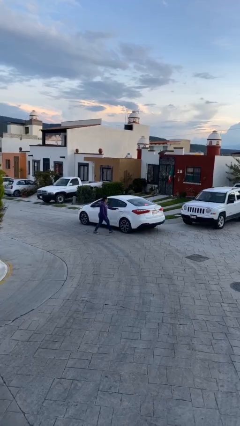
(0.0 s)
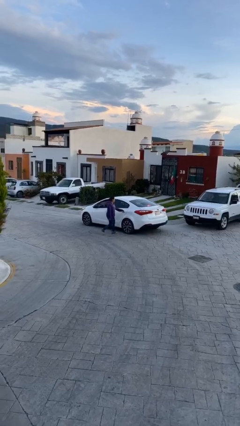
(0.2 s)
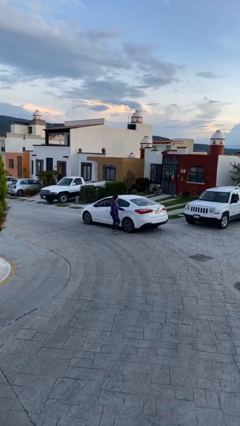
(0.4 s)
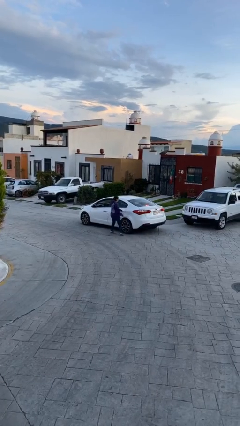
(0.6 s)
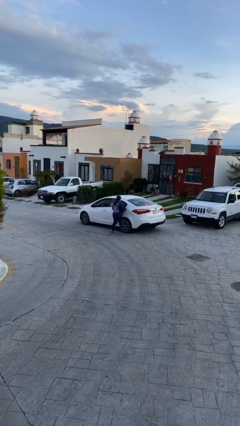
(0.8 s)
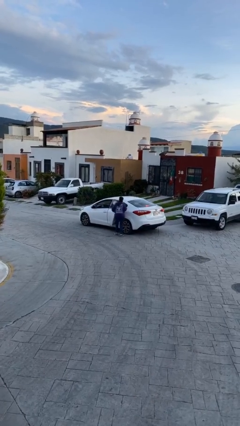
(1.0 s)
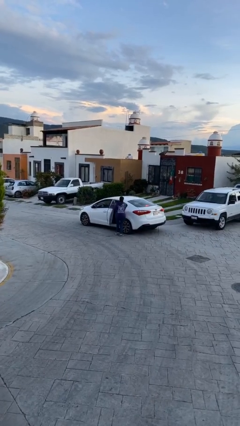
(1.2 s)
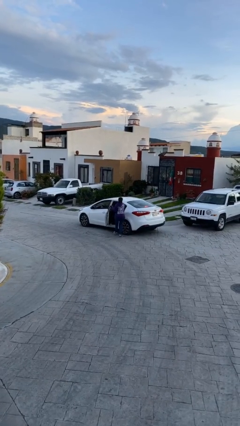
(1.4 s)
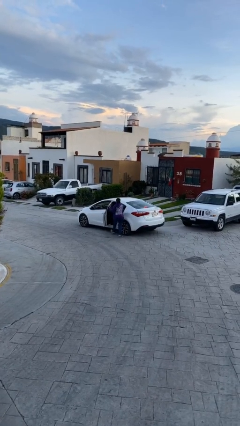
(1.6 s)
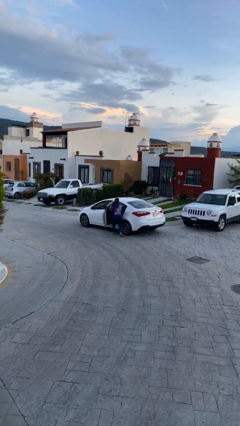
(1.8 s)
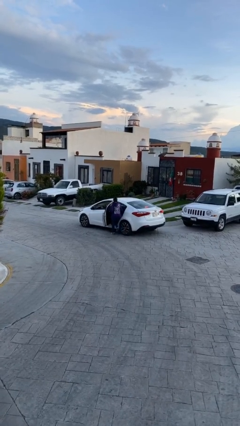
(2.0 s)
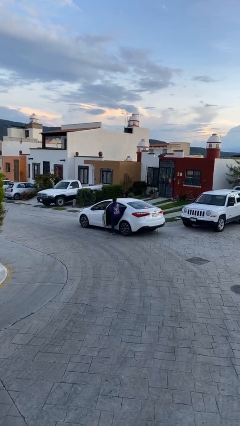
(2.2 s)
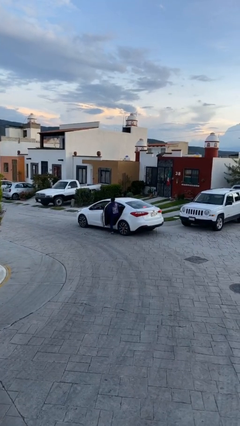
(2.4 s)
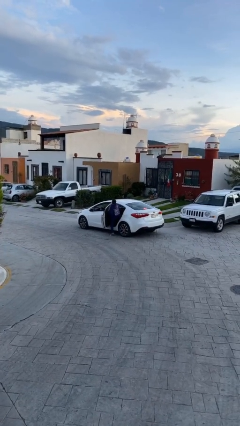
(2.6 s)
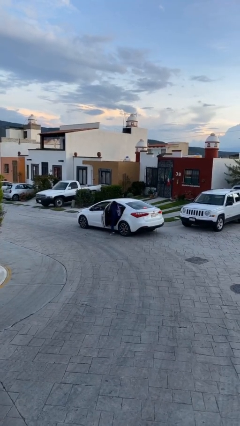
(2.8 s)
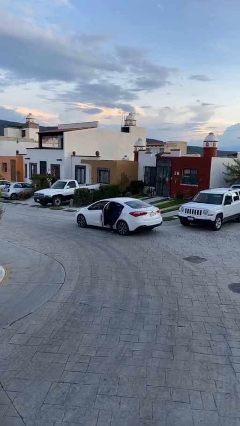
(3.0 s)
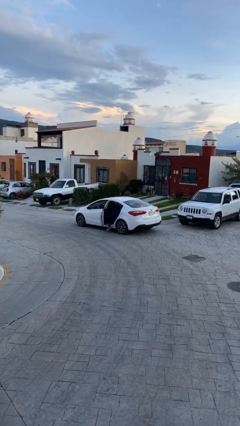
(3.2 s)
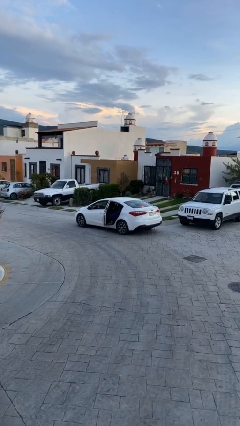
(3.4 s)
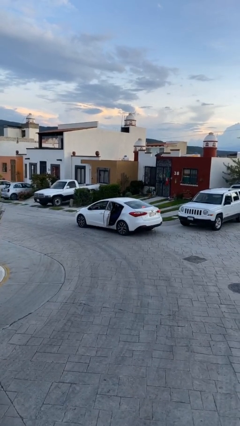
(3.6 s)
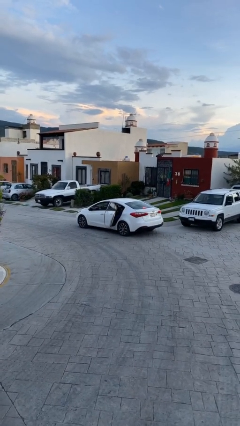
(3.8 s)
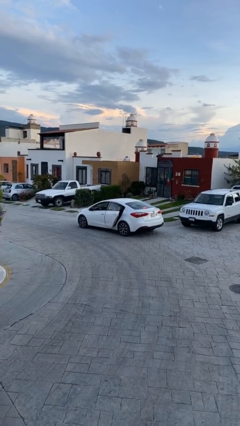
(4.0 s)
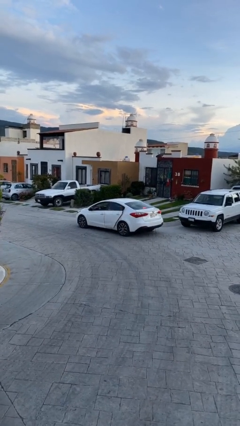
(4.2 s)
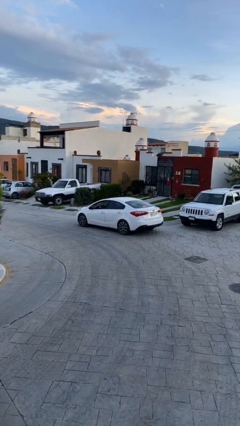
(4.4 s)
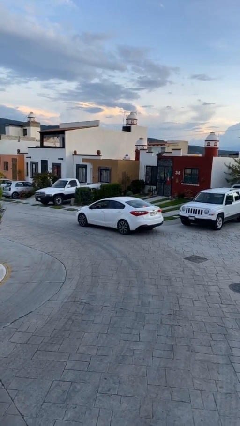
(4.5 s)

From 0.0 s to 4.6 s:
car picks up person

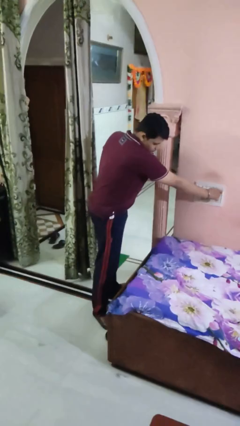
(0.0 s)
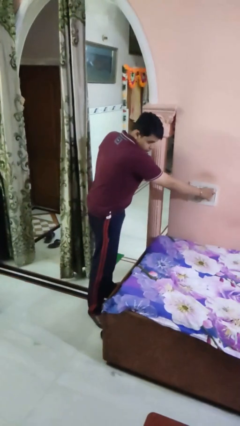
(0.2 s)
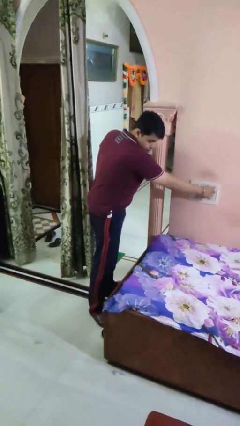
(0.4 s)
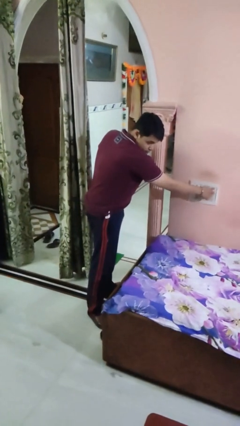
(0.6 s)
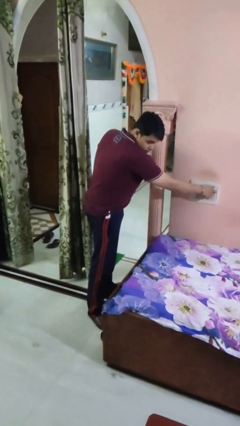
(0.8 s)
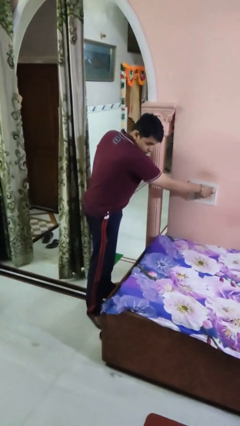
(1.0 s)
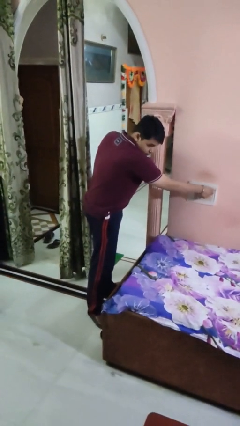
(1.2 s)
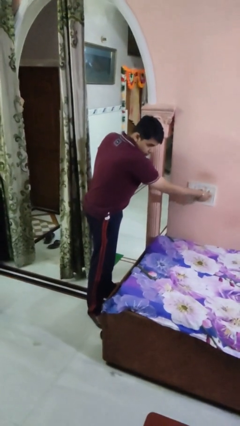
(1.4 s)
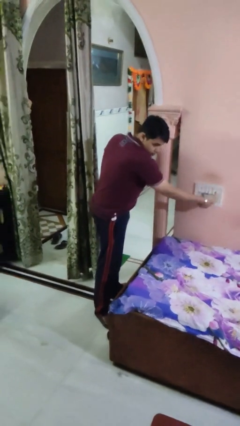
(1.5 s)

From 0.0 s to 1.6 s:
person adjusts thermostat

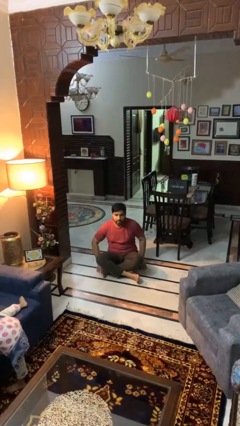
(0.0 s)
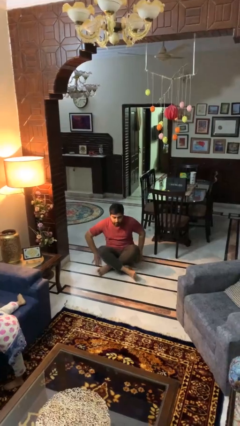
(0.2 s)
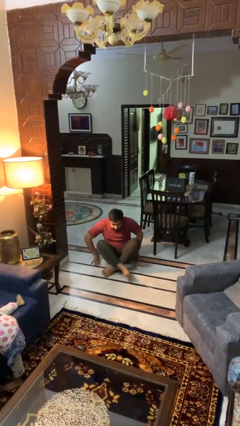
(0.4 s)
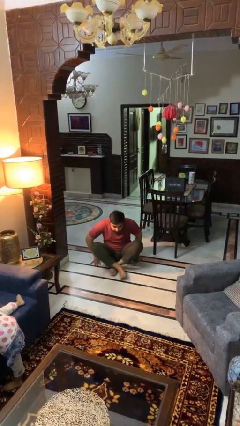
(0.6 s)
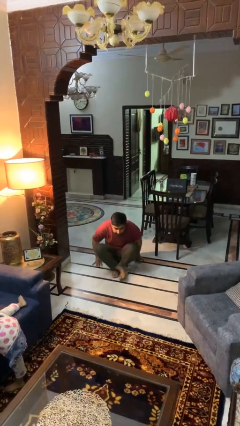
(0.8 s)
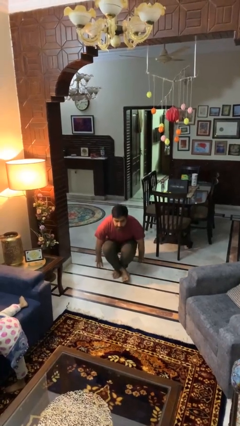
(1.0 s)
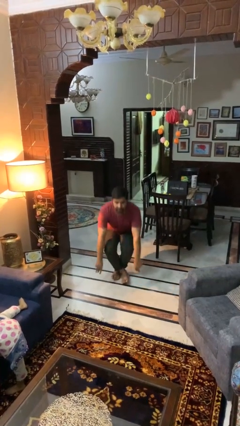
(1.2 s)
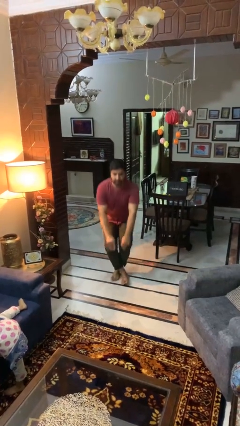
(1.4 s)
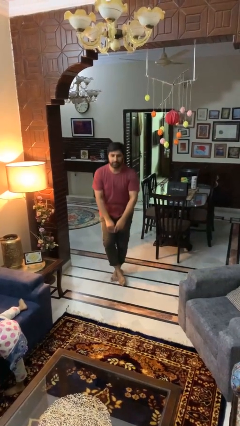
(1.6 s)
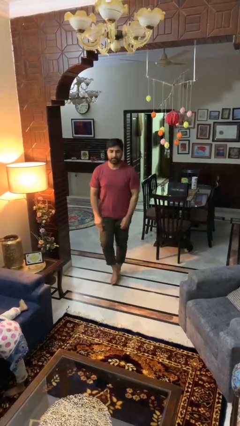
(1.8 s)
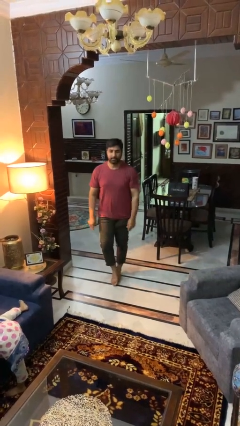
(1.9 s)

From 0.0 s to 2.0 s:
person stands up from floor

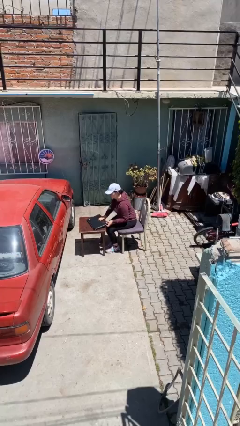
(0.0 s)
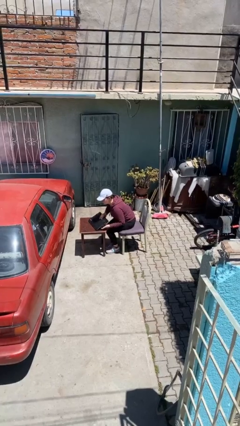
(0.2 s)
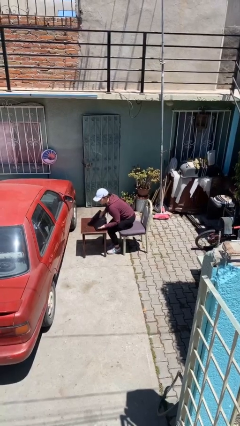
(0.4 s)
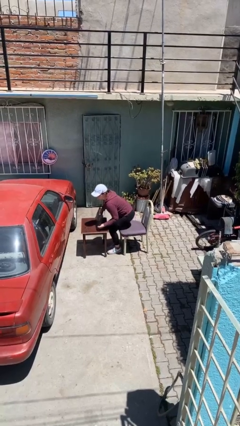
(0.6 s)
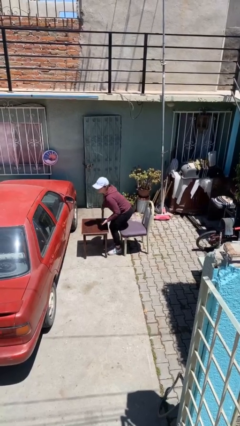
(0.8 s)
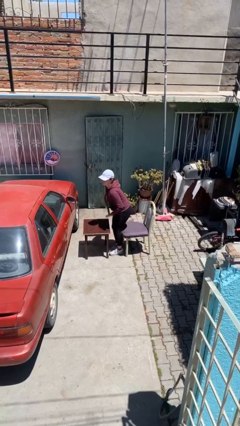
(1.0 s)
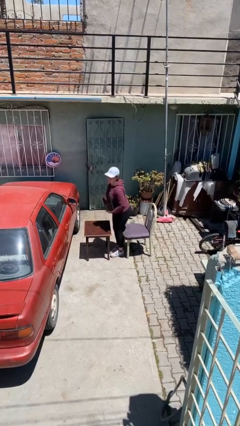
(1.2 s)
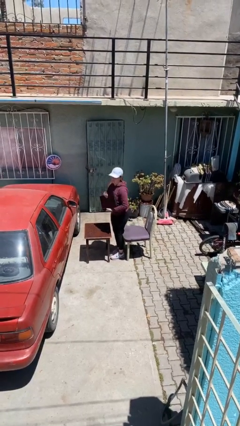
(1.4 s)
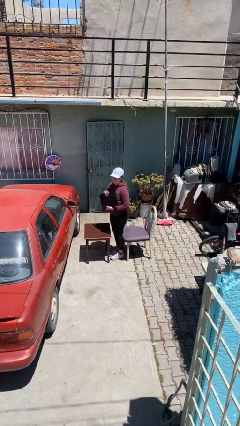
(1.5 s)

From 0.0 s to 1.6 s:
person stands up

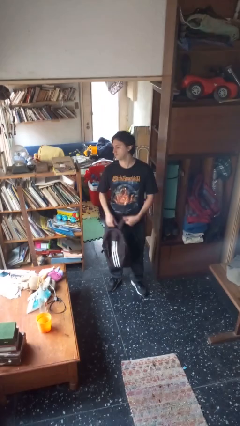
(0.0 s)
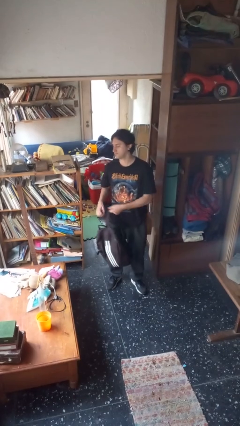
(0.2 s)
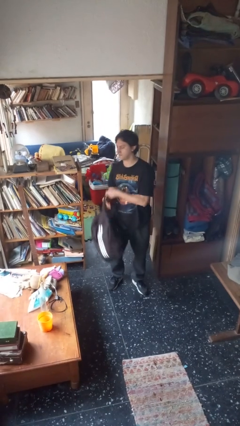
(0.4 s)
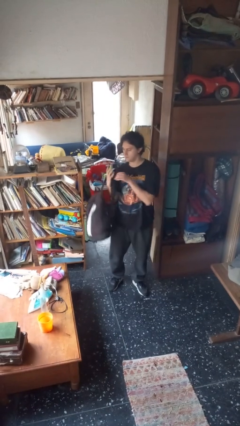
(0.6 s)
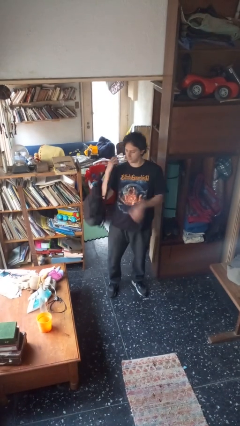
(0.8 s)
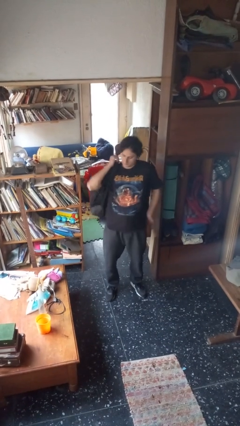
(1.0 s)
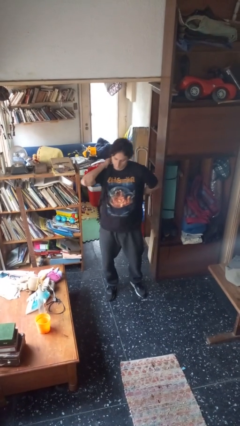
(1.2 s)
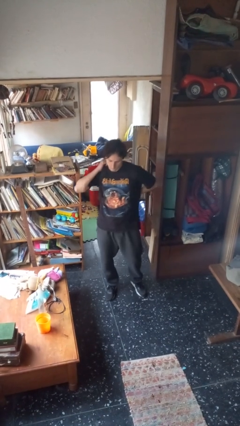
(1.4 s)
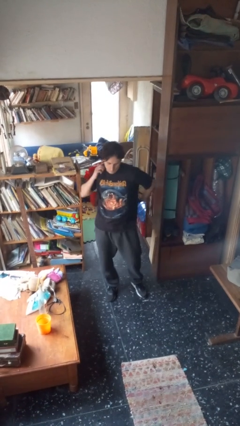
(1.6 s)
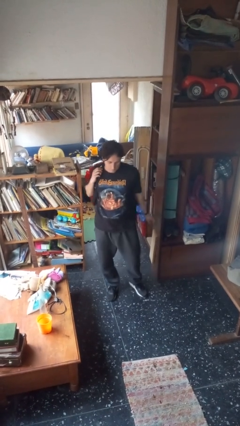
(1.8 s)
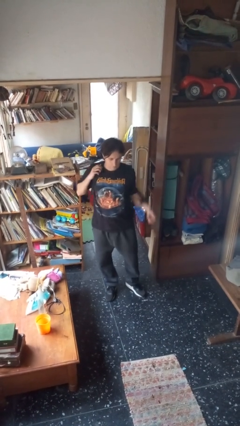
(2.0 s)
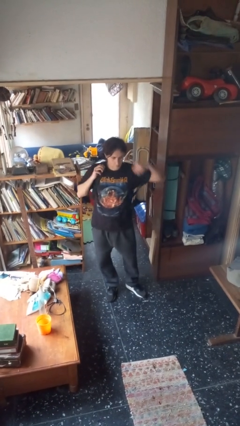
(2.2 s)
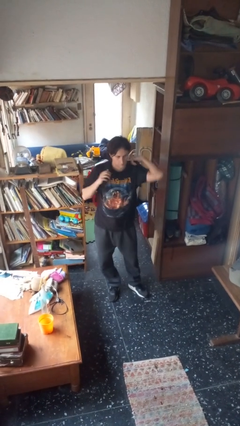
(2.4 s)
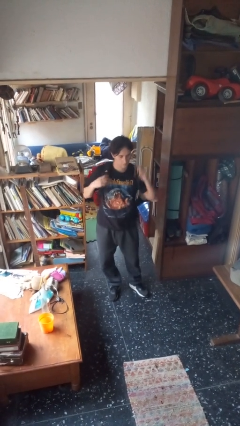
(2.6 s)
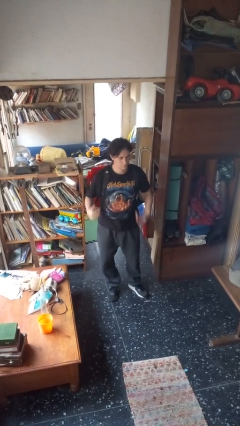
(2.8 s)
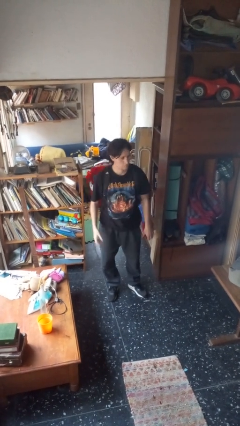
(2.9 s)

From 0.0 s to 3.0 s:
person puts on backpack

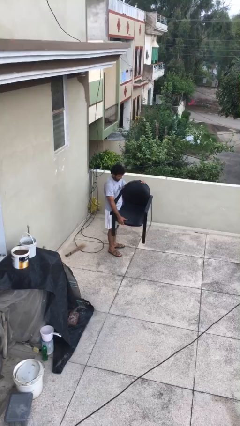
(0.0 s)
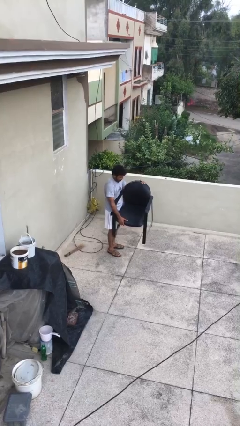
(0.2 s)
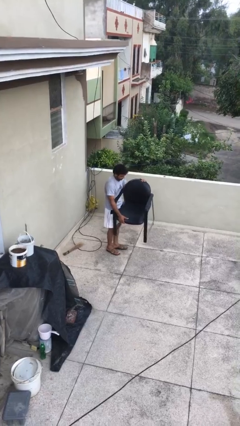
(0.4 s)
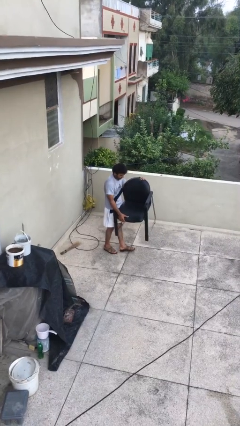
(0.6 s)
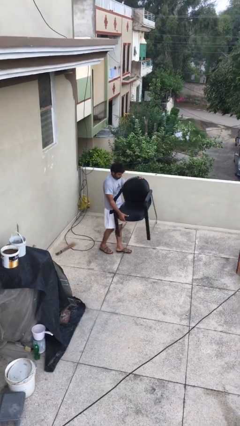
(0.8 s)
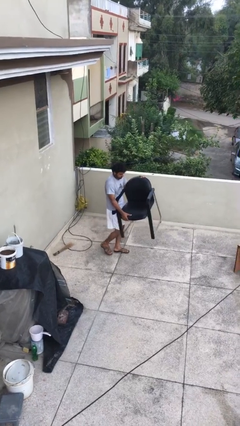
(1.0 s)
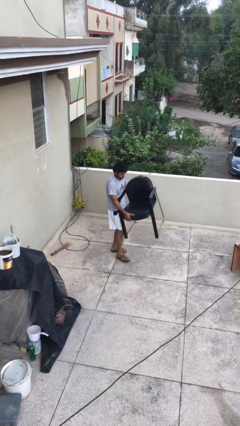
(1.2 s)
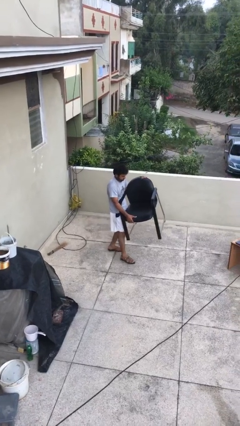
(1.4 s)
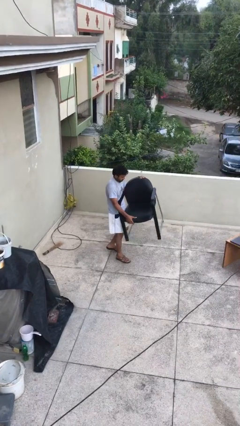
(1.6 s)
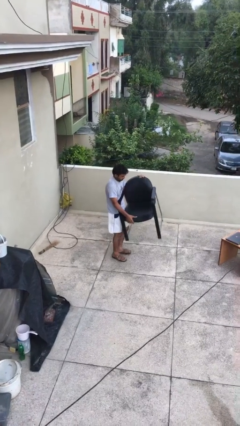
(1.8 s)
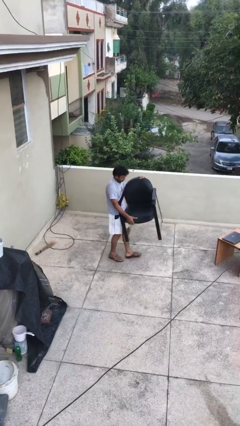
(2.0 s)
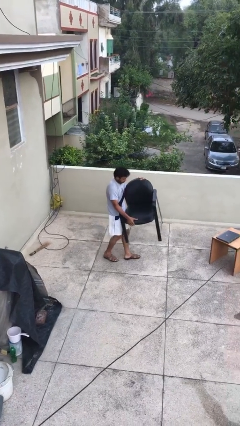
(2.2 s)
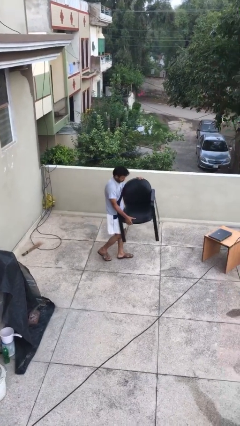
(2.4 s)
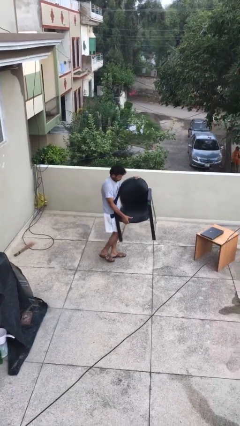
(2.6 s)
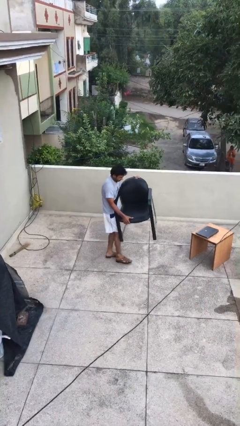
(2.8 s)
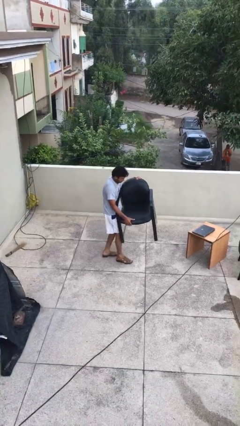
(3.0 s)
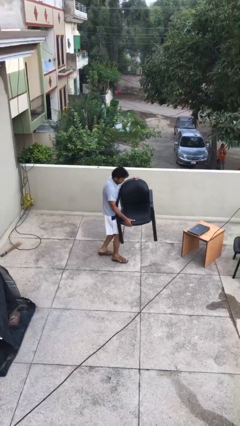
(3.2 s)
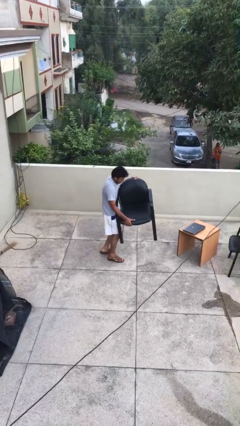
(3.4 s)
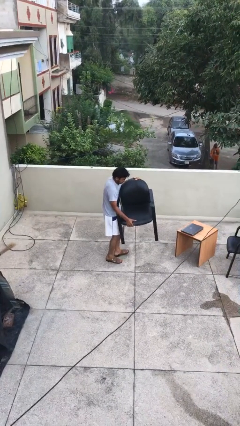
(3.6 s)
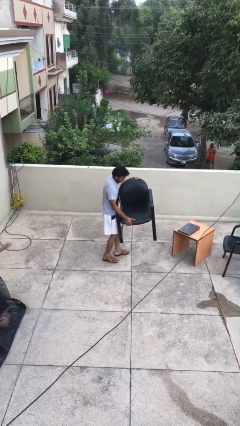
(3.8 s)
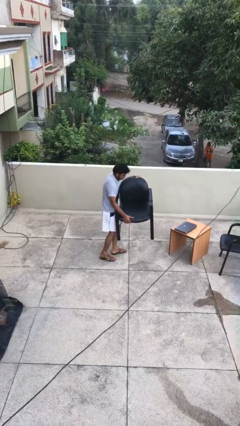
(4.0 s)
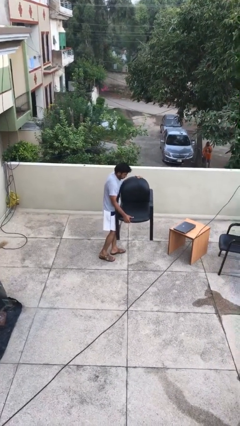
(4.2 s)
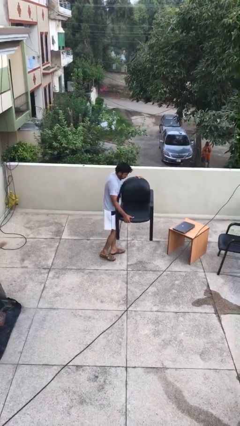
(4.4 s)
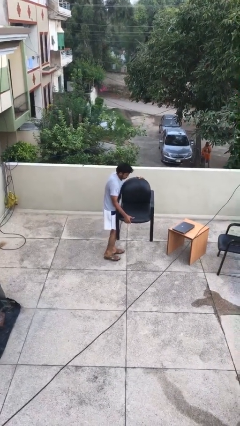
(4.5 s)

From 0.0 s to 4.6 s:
person carries heavy object
